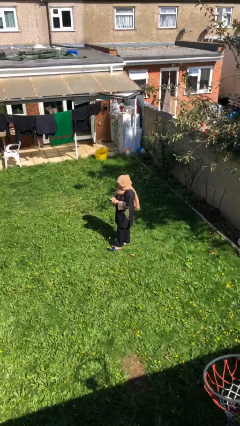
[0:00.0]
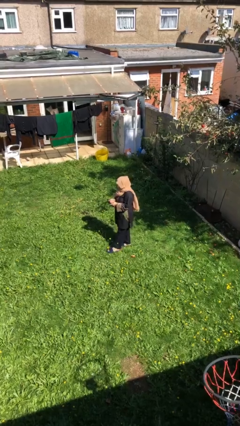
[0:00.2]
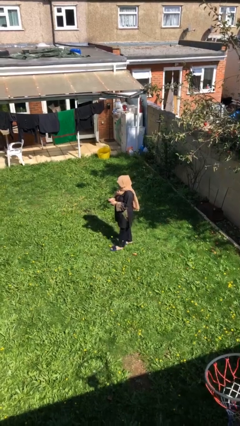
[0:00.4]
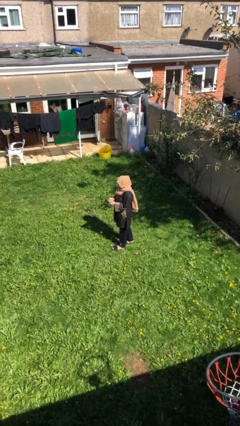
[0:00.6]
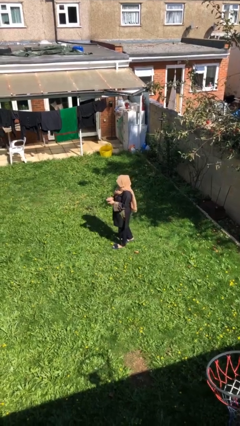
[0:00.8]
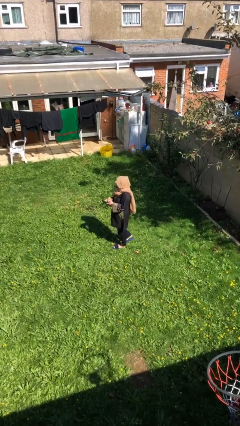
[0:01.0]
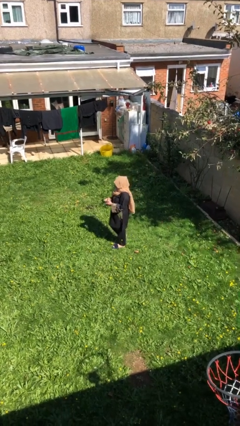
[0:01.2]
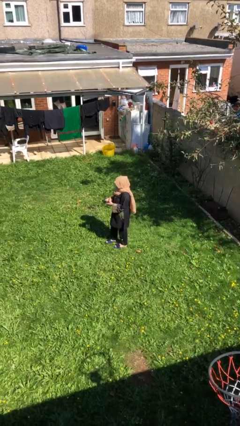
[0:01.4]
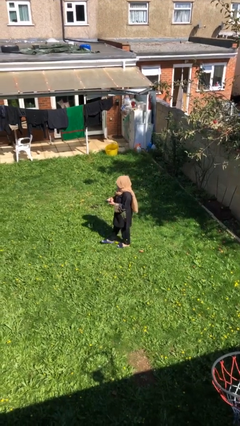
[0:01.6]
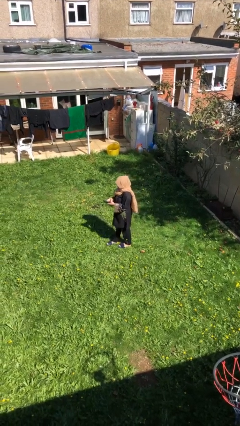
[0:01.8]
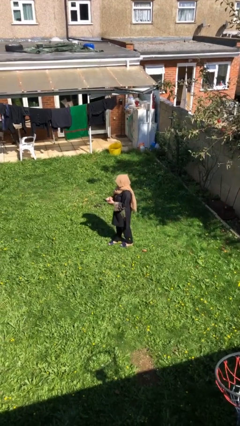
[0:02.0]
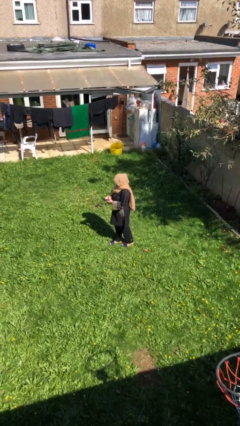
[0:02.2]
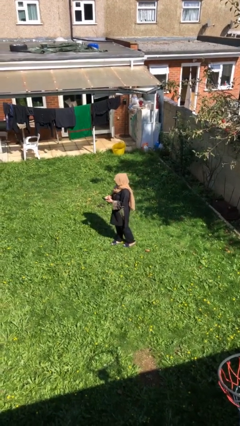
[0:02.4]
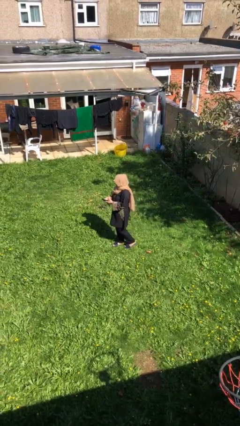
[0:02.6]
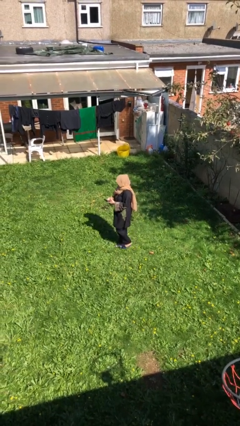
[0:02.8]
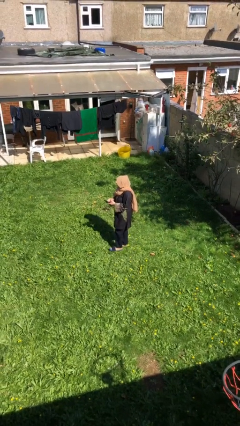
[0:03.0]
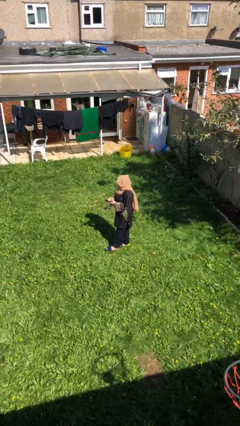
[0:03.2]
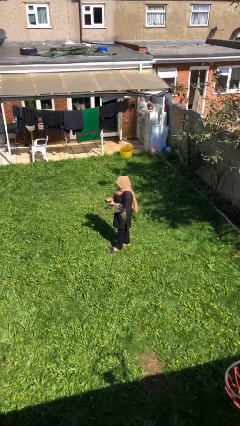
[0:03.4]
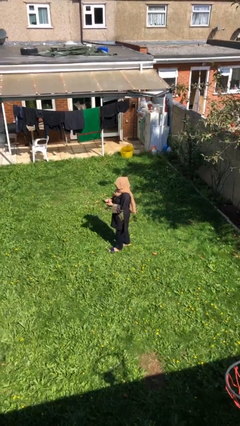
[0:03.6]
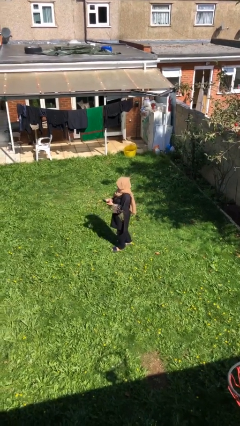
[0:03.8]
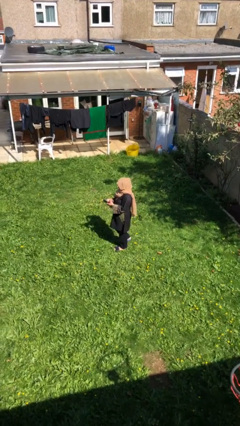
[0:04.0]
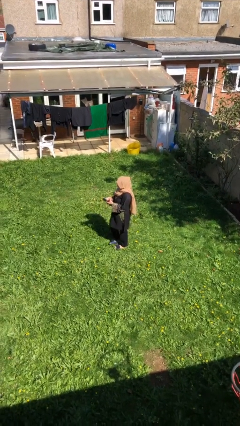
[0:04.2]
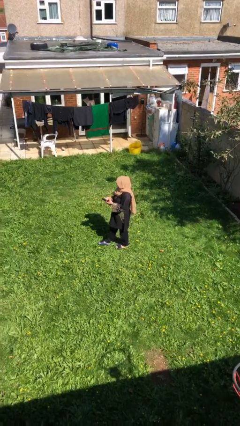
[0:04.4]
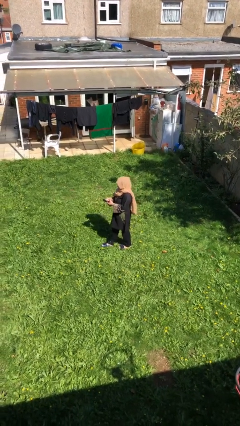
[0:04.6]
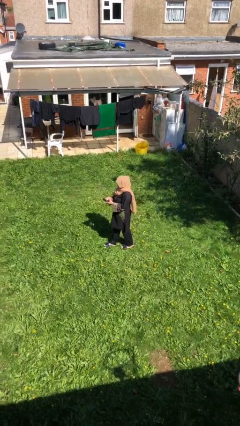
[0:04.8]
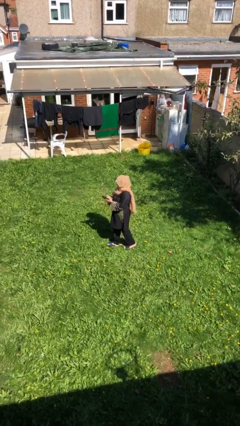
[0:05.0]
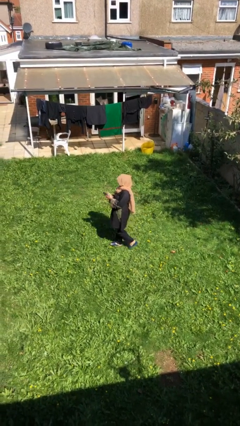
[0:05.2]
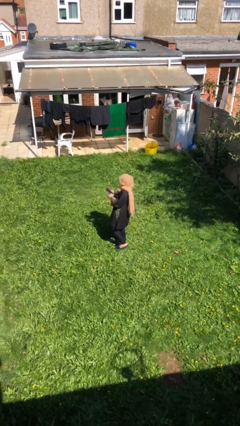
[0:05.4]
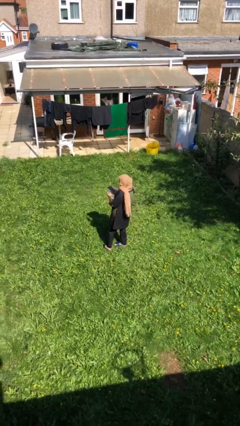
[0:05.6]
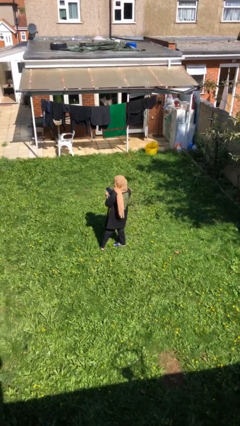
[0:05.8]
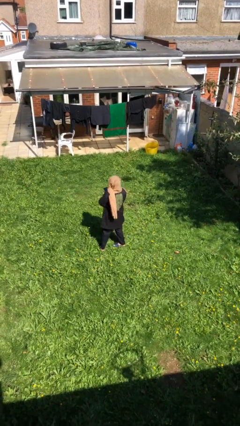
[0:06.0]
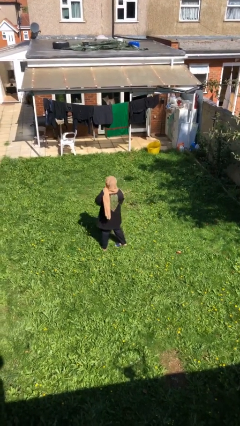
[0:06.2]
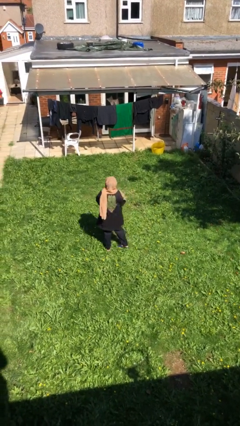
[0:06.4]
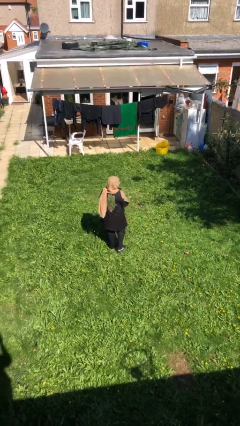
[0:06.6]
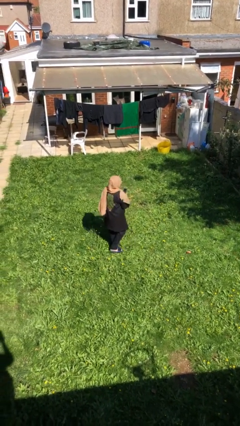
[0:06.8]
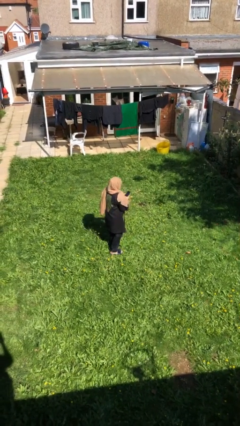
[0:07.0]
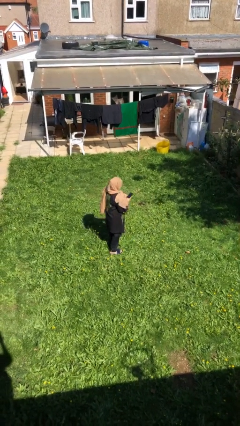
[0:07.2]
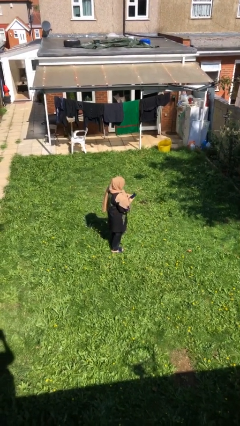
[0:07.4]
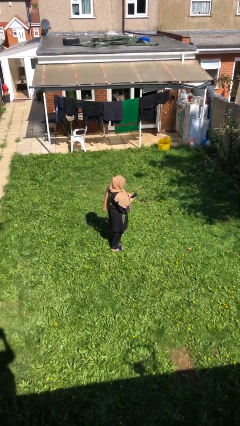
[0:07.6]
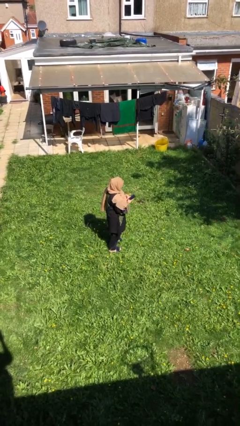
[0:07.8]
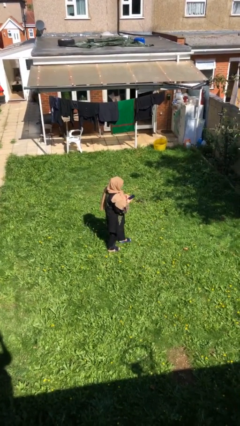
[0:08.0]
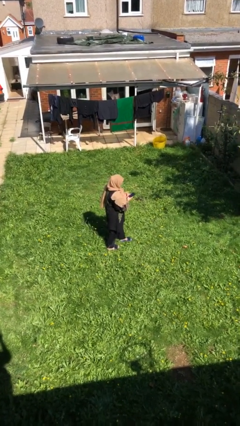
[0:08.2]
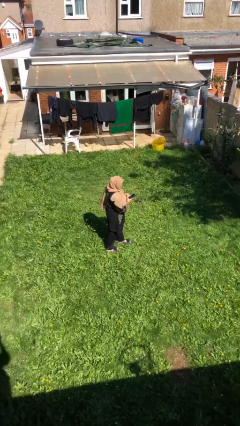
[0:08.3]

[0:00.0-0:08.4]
person texts on phone

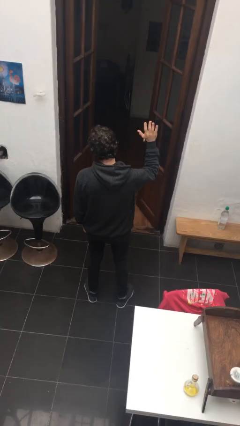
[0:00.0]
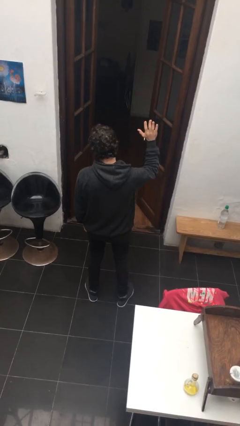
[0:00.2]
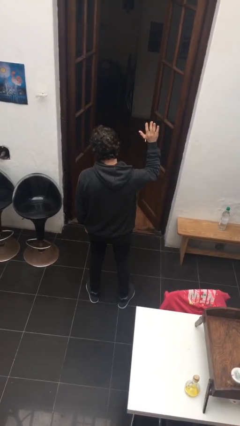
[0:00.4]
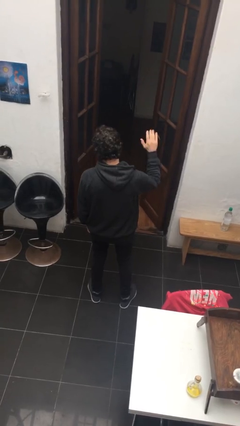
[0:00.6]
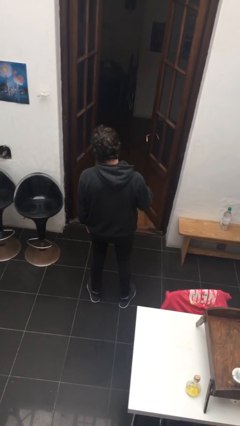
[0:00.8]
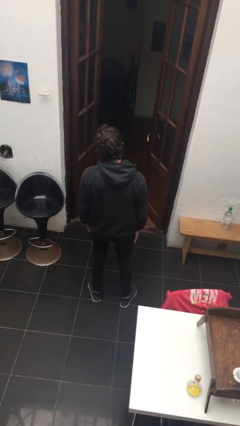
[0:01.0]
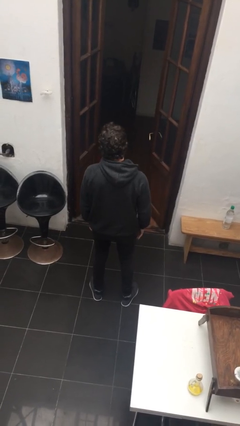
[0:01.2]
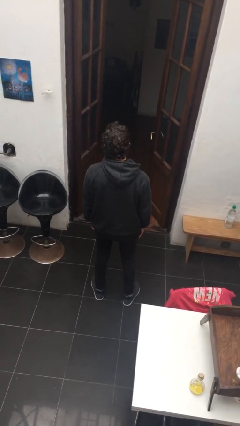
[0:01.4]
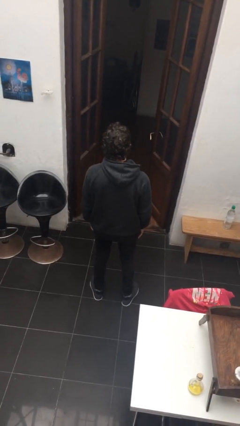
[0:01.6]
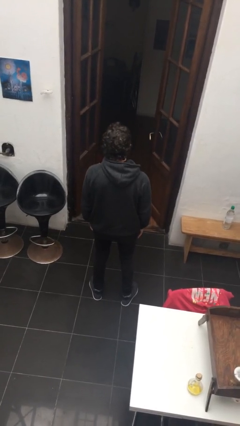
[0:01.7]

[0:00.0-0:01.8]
person gestures lower hand

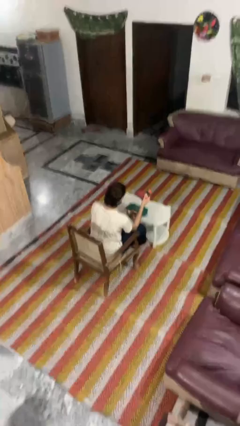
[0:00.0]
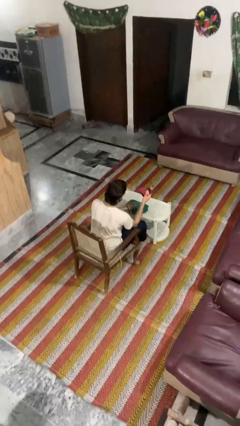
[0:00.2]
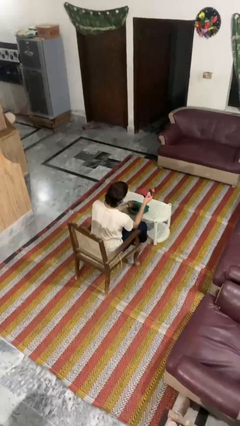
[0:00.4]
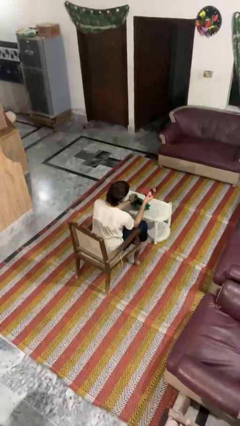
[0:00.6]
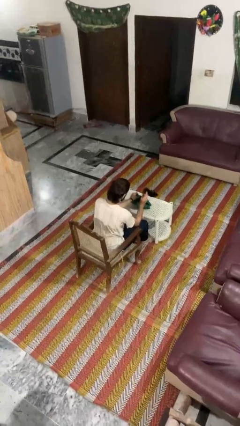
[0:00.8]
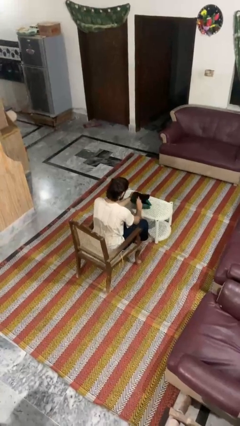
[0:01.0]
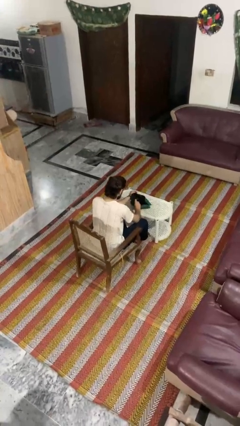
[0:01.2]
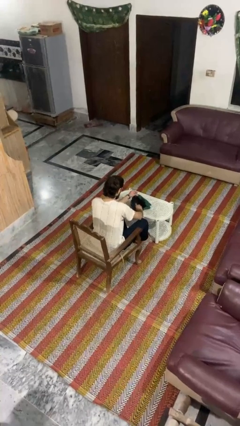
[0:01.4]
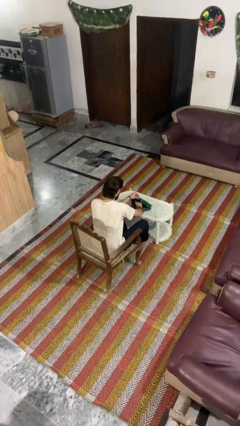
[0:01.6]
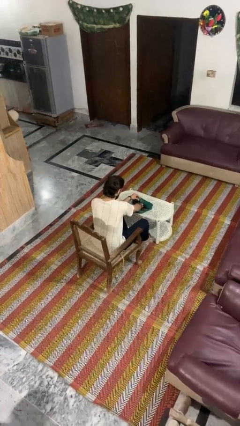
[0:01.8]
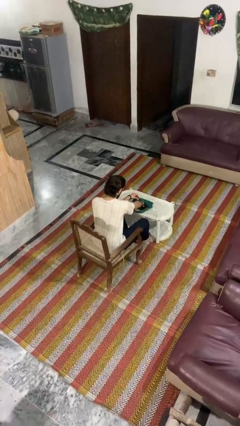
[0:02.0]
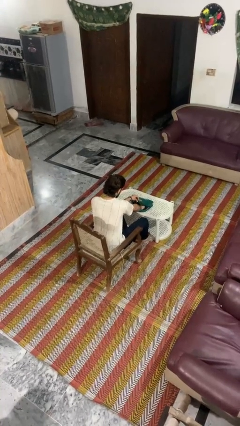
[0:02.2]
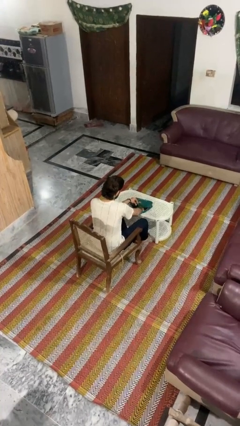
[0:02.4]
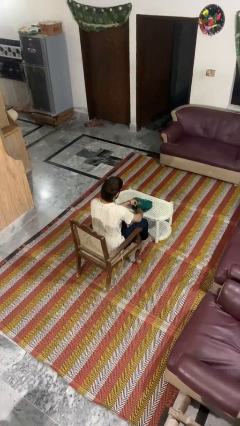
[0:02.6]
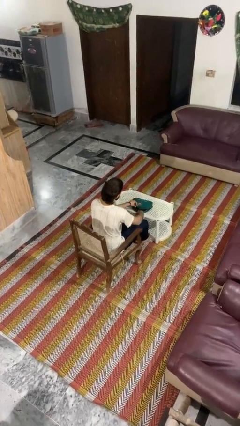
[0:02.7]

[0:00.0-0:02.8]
person puts object into purse

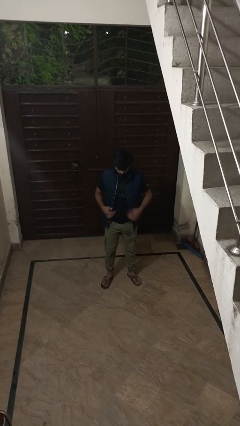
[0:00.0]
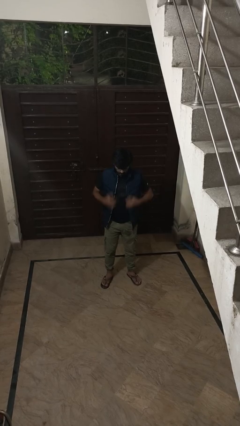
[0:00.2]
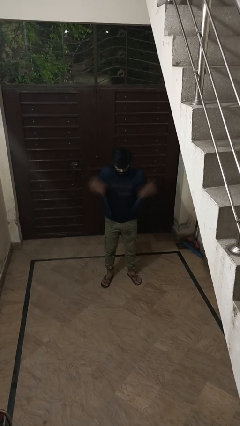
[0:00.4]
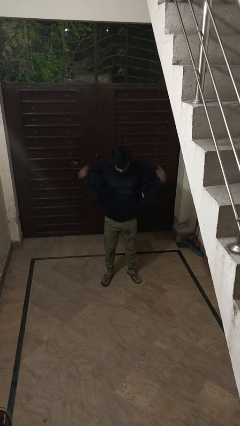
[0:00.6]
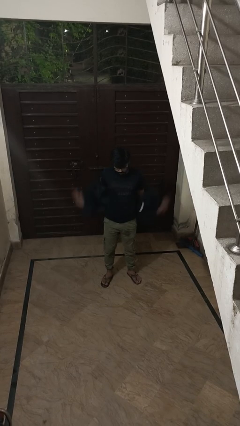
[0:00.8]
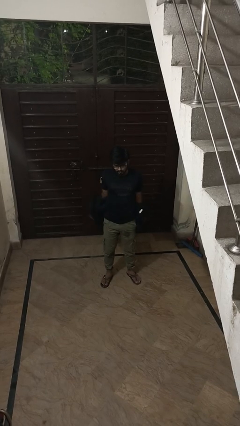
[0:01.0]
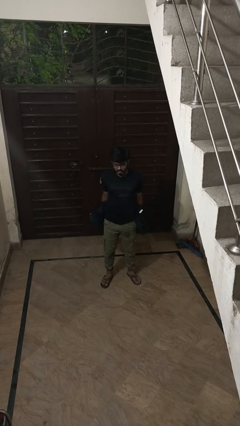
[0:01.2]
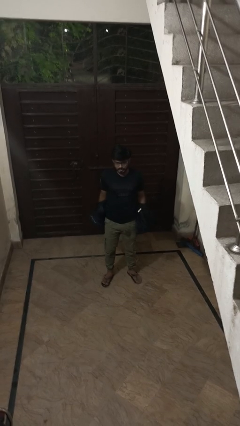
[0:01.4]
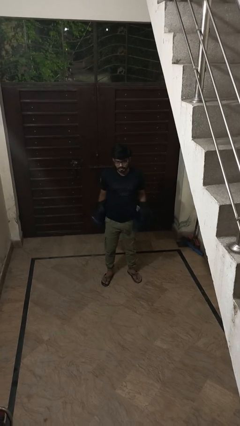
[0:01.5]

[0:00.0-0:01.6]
person takes off jacket

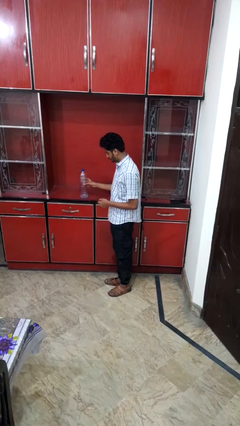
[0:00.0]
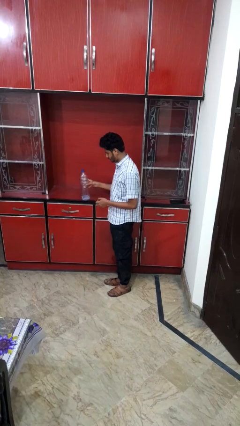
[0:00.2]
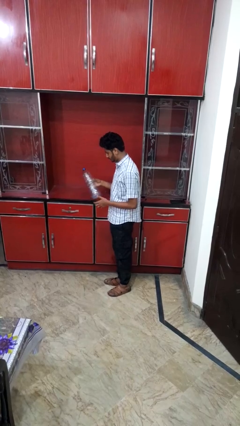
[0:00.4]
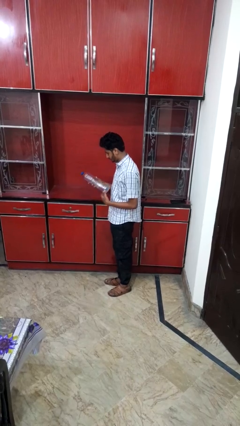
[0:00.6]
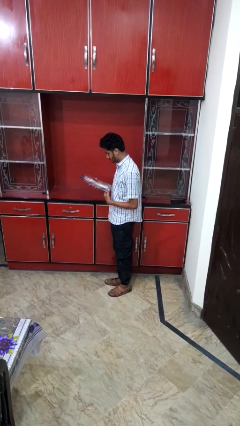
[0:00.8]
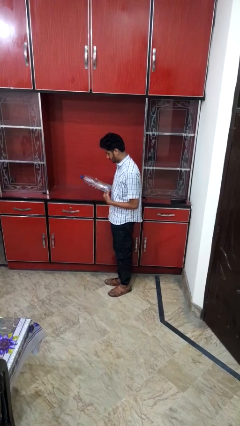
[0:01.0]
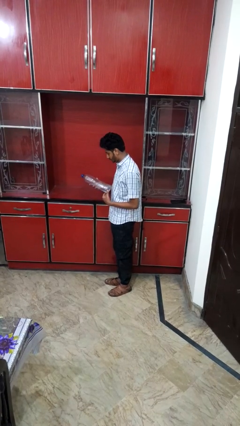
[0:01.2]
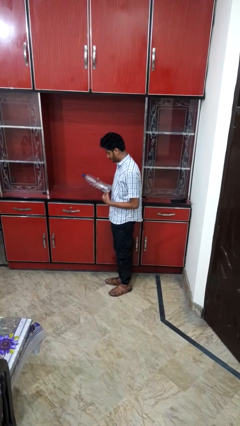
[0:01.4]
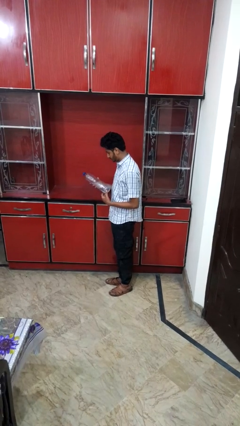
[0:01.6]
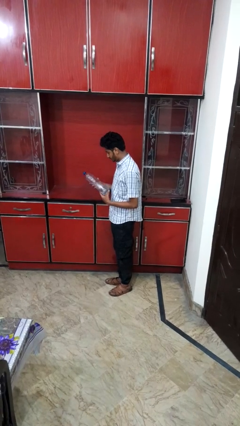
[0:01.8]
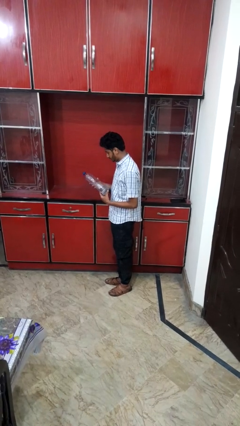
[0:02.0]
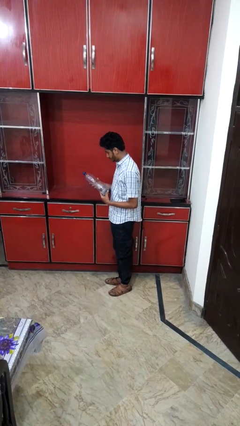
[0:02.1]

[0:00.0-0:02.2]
person picks up object from countertop

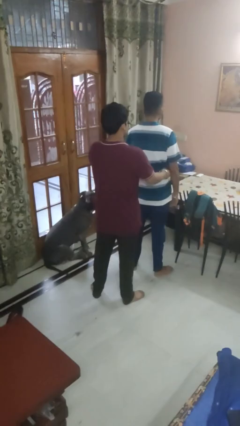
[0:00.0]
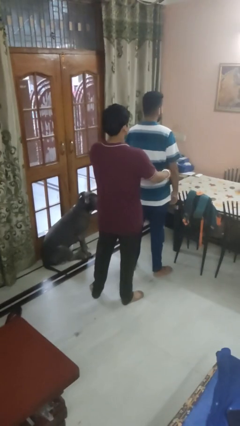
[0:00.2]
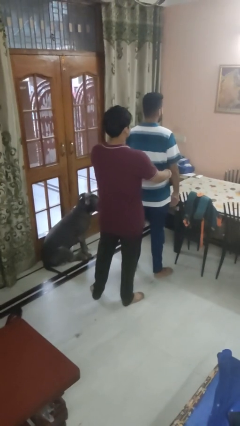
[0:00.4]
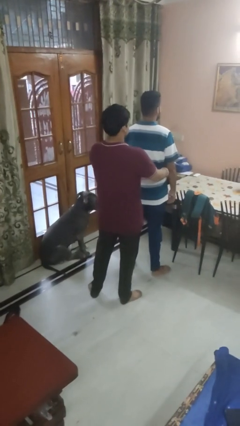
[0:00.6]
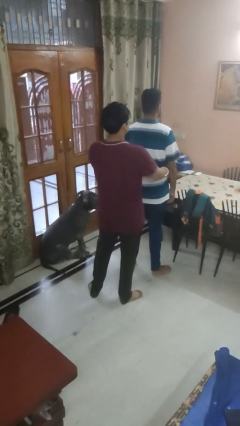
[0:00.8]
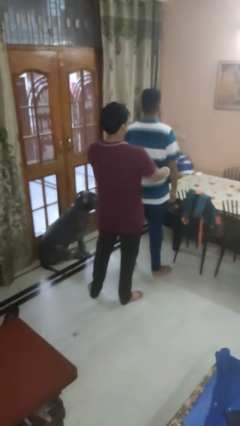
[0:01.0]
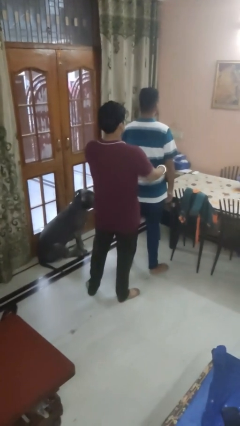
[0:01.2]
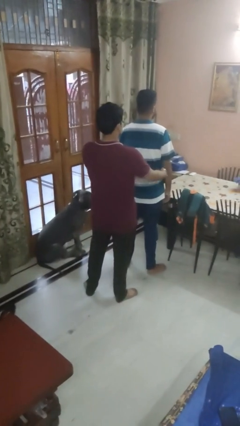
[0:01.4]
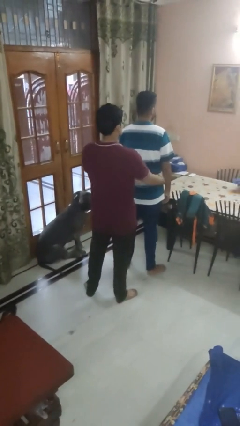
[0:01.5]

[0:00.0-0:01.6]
person tickles person
